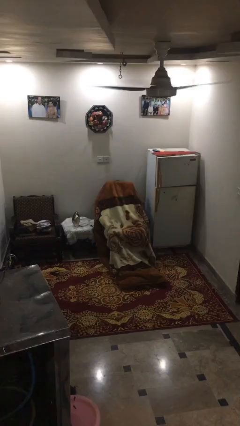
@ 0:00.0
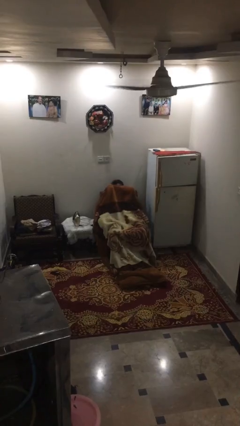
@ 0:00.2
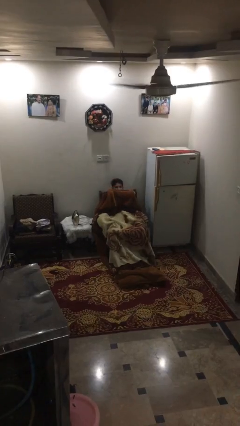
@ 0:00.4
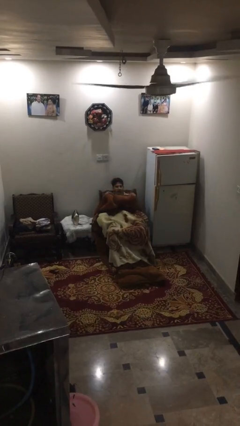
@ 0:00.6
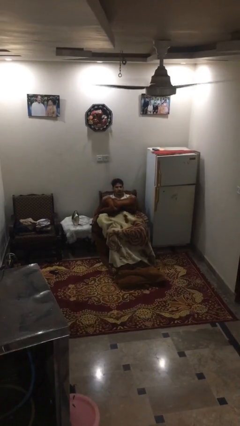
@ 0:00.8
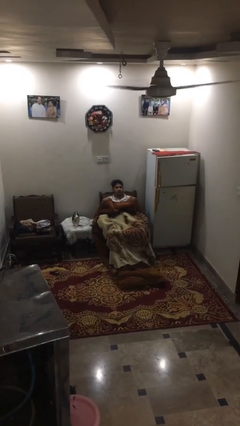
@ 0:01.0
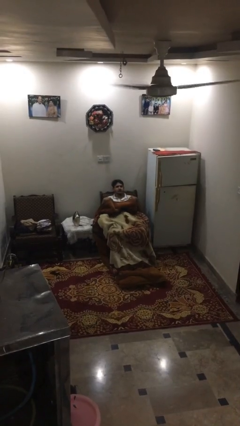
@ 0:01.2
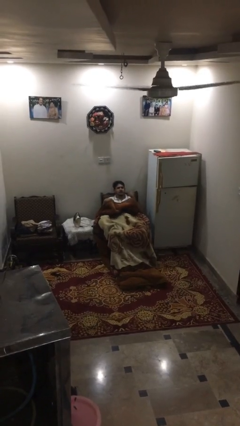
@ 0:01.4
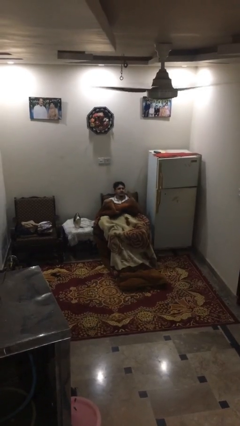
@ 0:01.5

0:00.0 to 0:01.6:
person uncovers with blanket

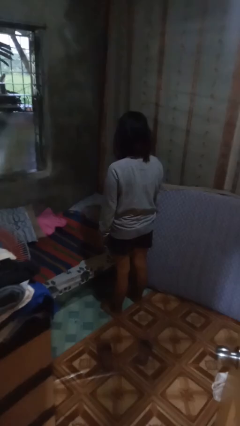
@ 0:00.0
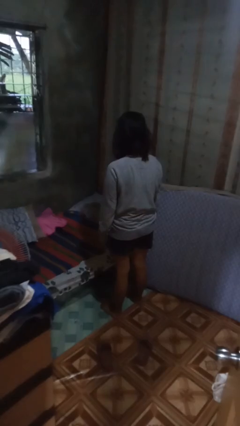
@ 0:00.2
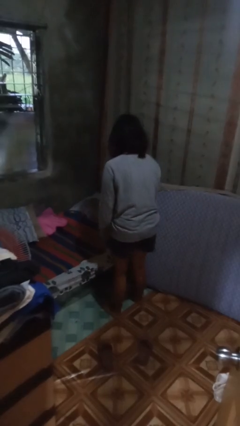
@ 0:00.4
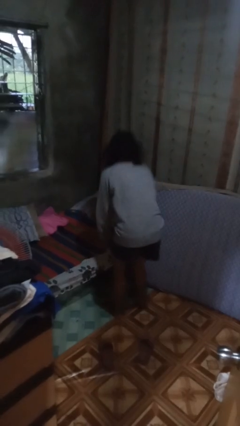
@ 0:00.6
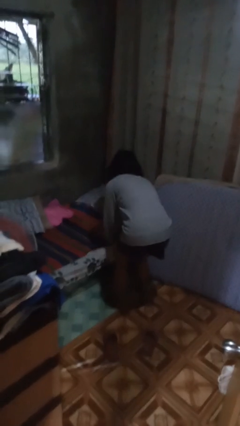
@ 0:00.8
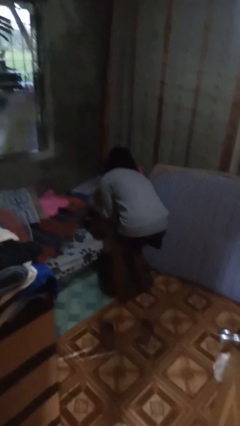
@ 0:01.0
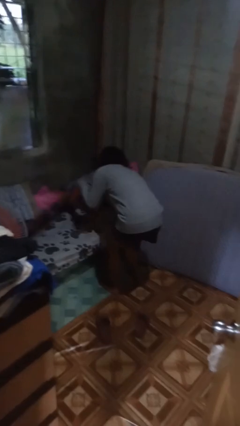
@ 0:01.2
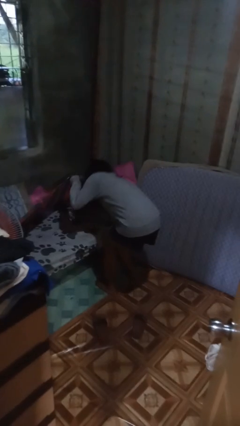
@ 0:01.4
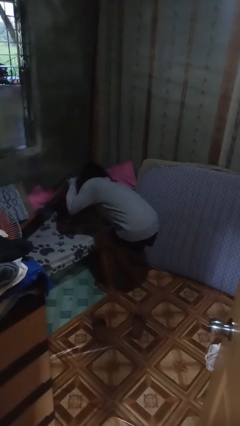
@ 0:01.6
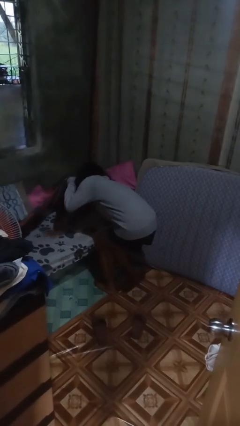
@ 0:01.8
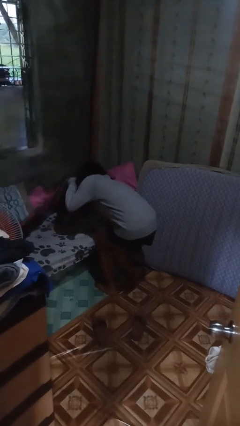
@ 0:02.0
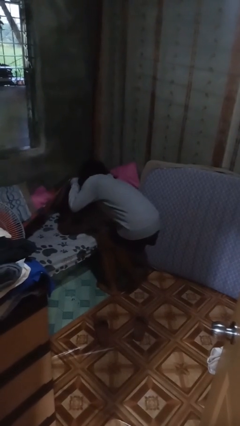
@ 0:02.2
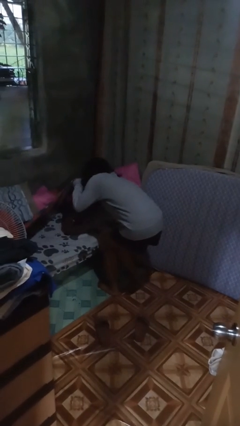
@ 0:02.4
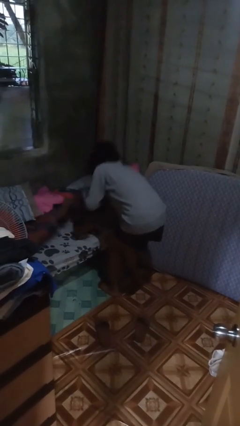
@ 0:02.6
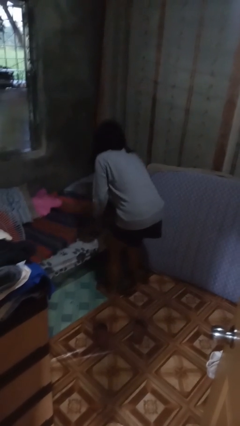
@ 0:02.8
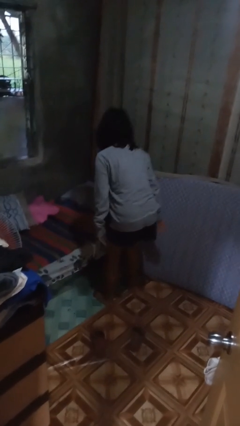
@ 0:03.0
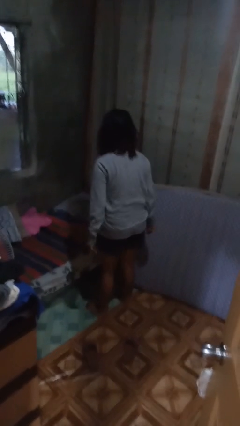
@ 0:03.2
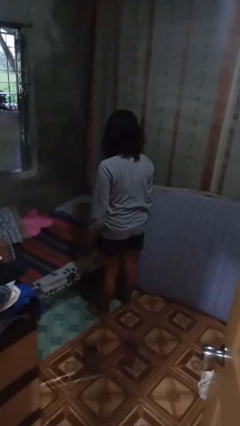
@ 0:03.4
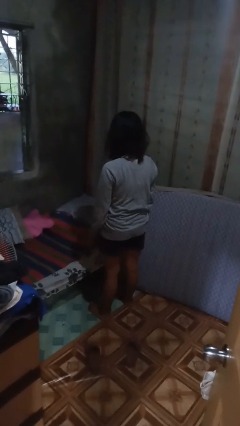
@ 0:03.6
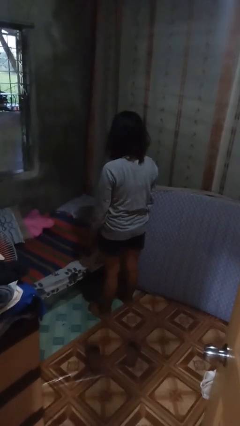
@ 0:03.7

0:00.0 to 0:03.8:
person searches under bed

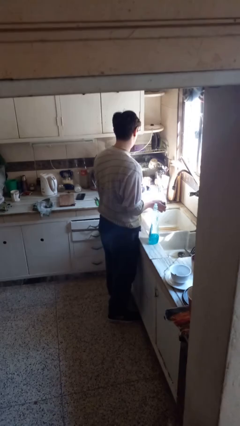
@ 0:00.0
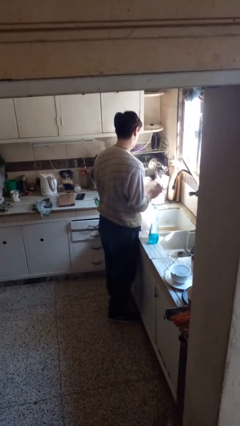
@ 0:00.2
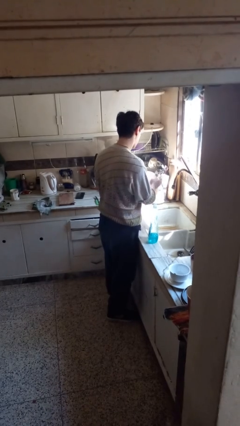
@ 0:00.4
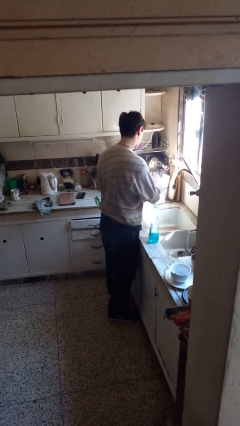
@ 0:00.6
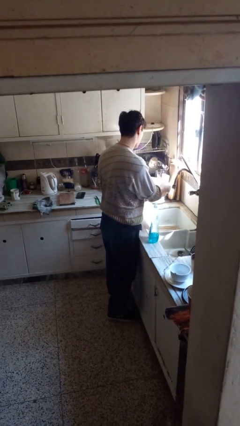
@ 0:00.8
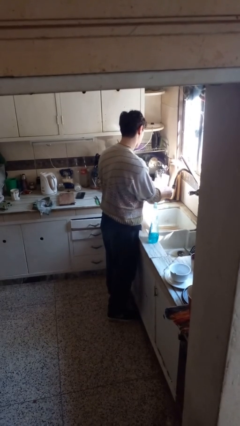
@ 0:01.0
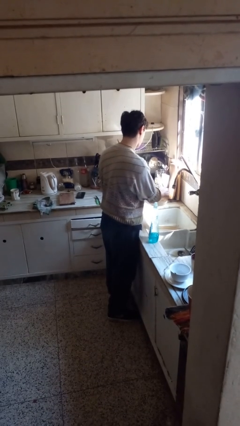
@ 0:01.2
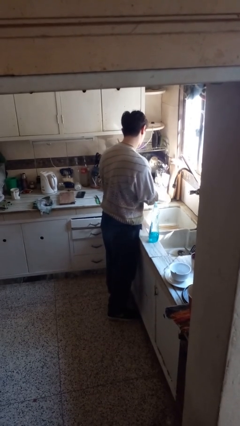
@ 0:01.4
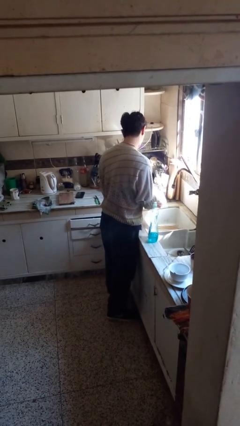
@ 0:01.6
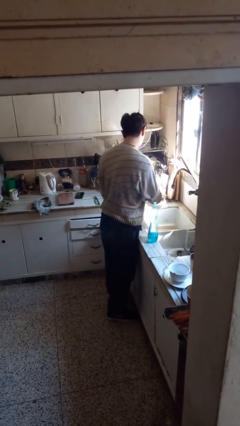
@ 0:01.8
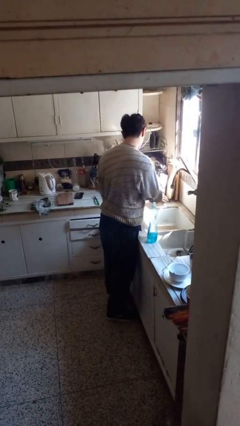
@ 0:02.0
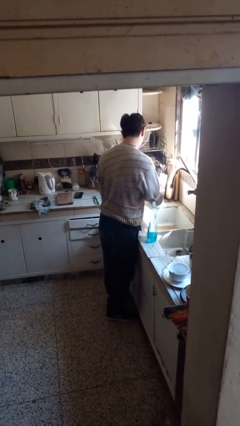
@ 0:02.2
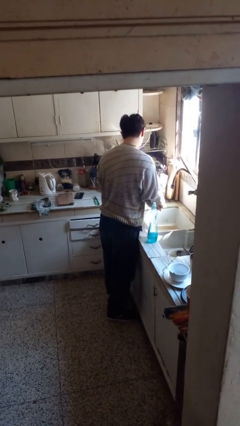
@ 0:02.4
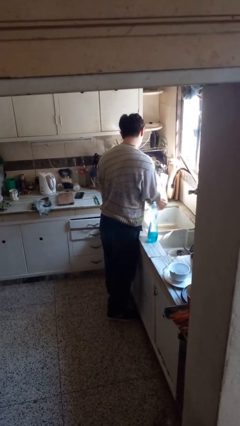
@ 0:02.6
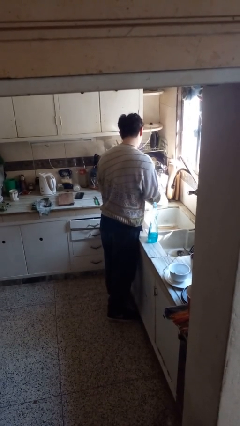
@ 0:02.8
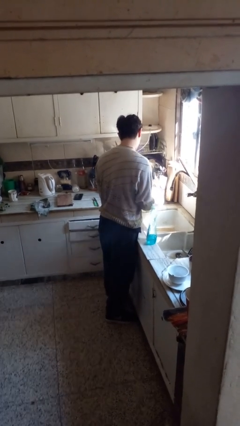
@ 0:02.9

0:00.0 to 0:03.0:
person washes dish

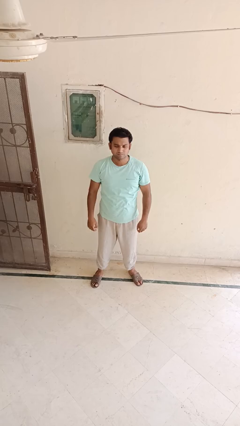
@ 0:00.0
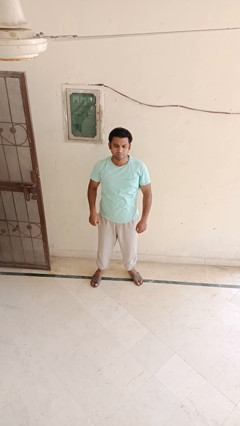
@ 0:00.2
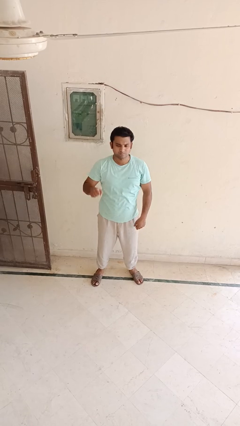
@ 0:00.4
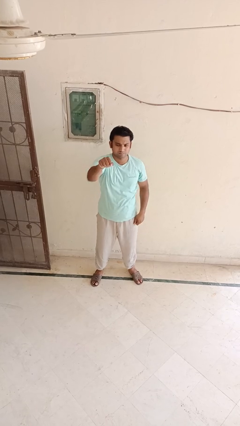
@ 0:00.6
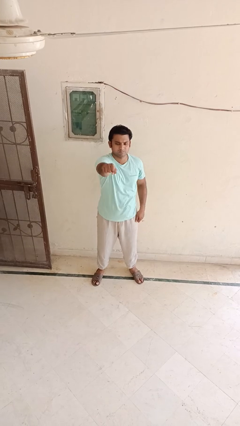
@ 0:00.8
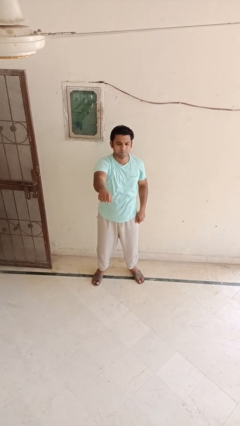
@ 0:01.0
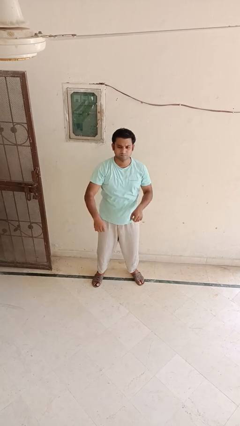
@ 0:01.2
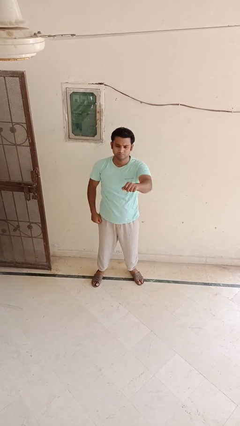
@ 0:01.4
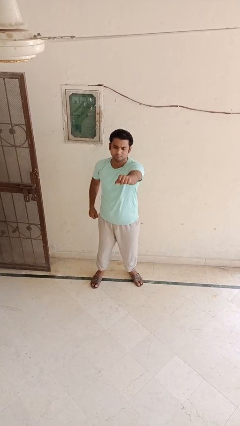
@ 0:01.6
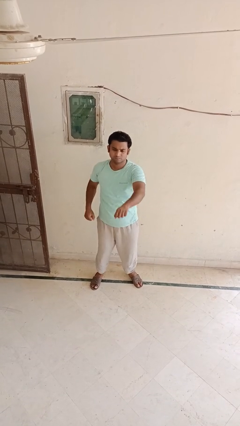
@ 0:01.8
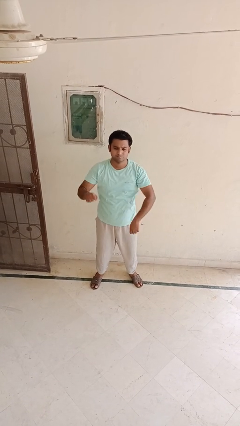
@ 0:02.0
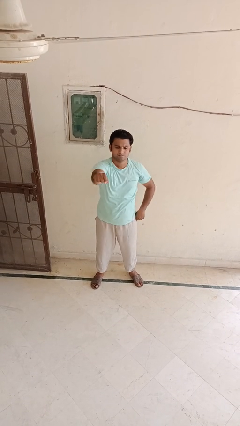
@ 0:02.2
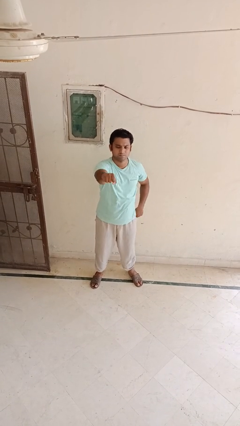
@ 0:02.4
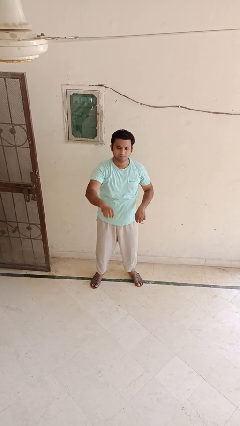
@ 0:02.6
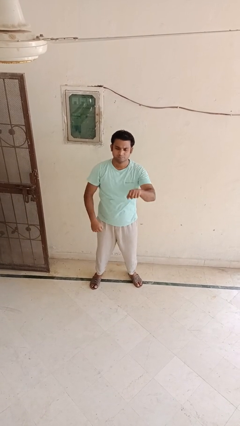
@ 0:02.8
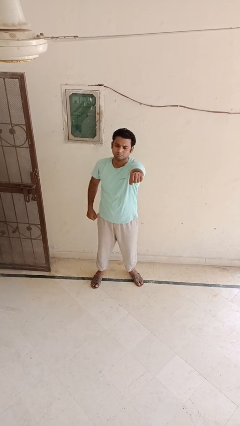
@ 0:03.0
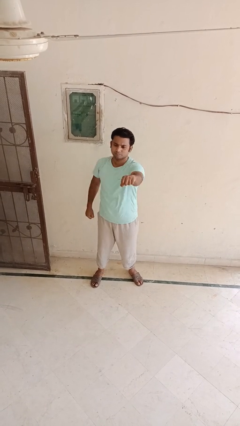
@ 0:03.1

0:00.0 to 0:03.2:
person punches

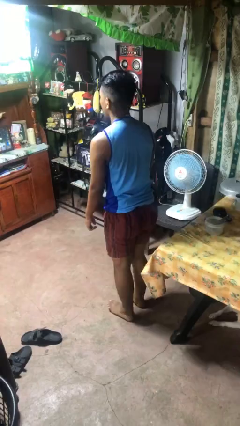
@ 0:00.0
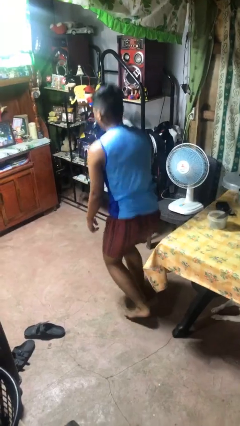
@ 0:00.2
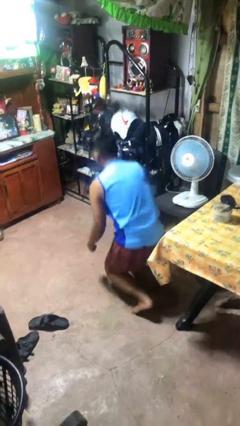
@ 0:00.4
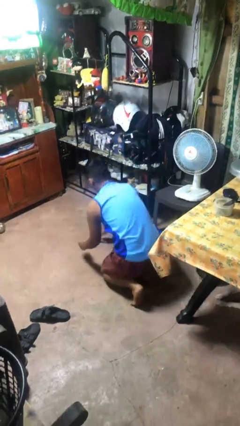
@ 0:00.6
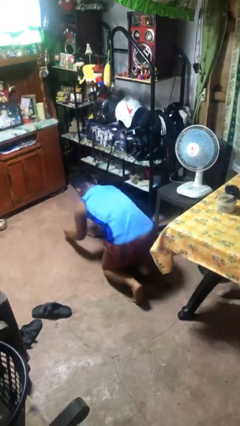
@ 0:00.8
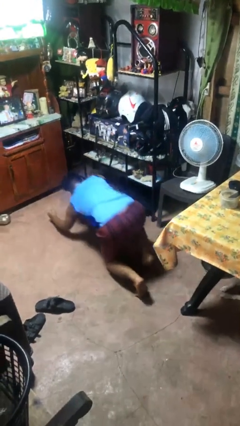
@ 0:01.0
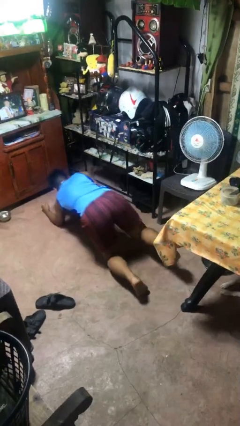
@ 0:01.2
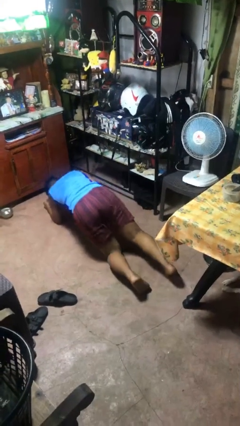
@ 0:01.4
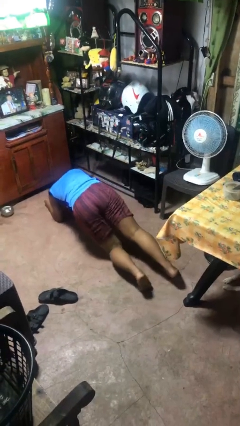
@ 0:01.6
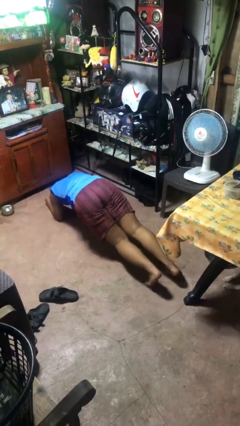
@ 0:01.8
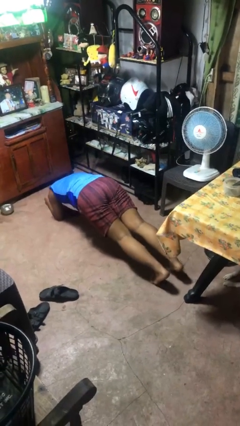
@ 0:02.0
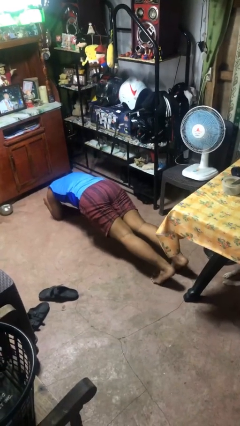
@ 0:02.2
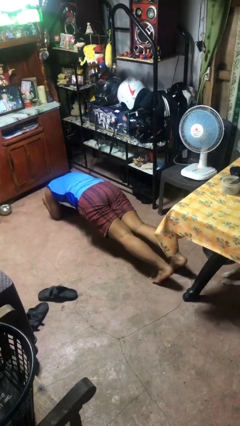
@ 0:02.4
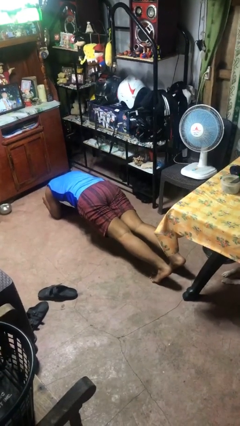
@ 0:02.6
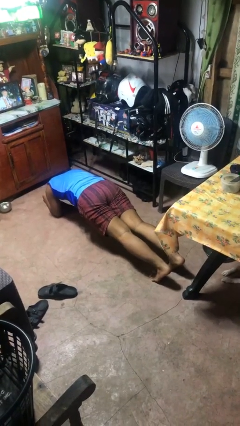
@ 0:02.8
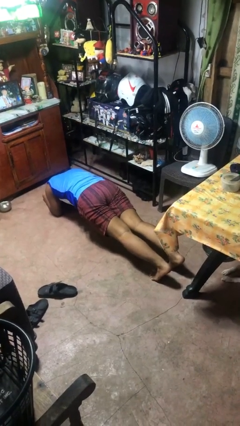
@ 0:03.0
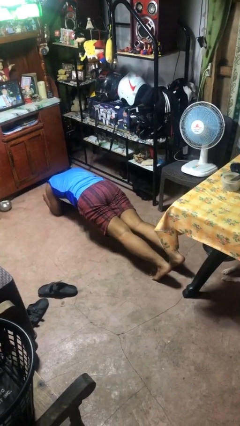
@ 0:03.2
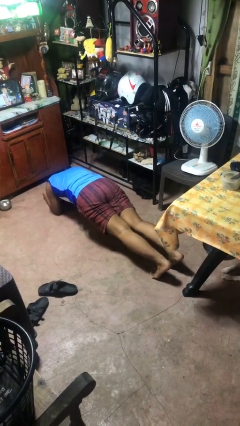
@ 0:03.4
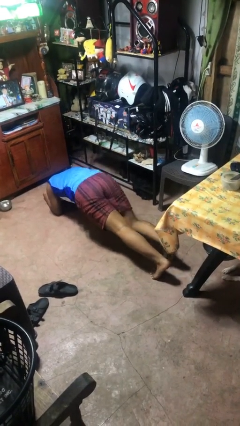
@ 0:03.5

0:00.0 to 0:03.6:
person exercises with plank

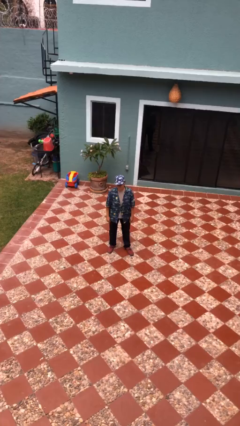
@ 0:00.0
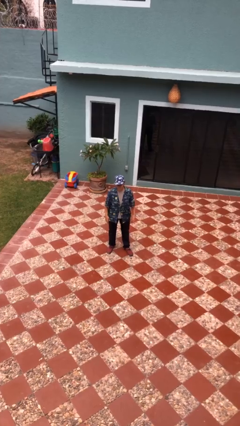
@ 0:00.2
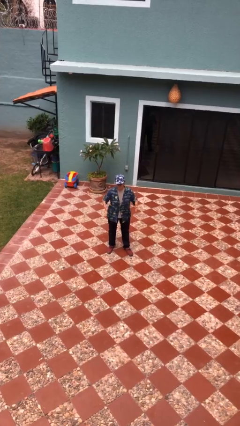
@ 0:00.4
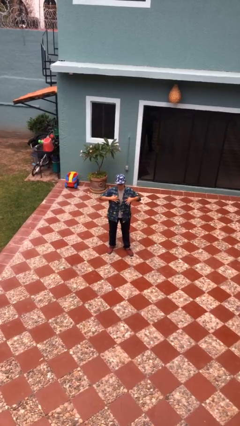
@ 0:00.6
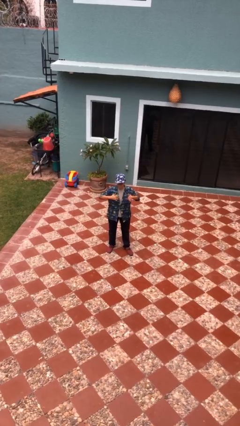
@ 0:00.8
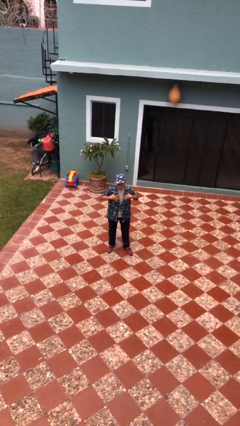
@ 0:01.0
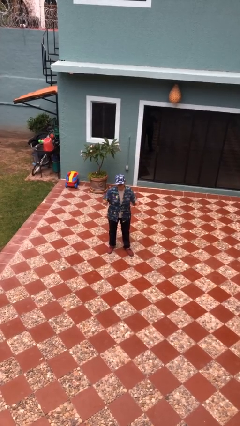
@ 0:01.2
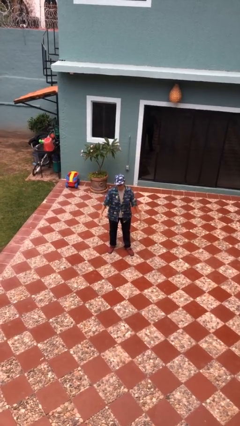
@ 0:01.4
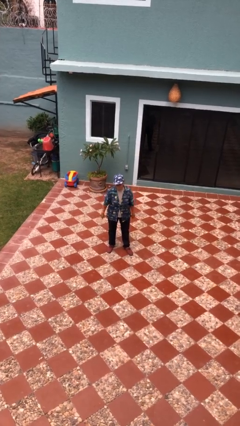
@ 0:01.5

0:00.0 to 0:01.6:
person drums on chest

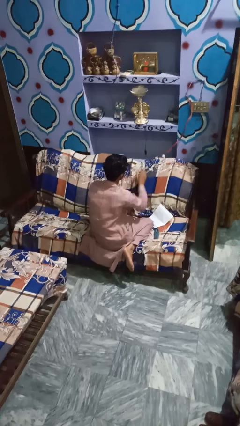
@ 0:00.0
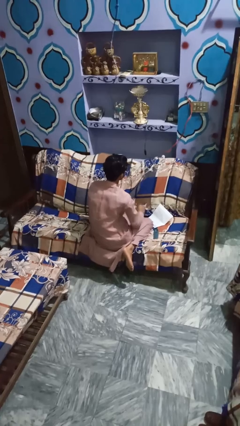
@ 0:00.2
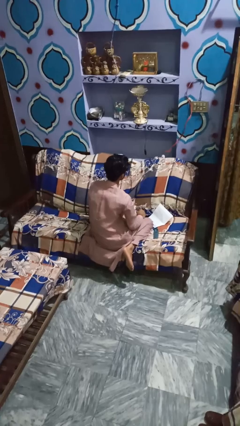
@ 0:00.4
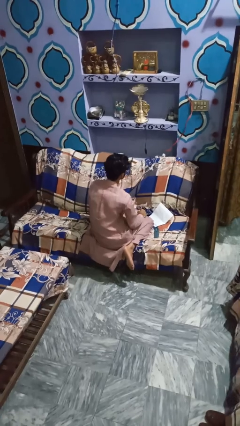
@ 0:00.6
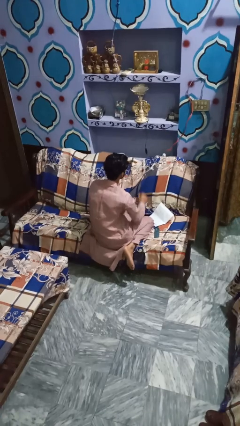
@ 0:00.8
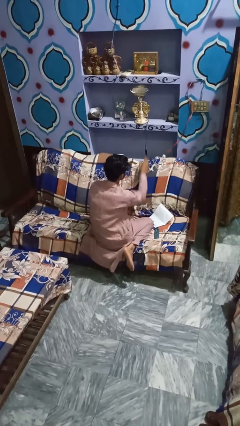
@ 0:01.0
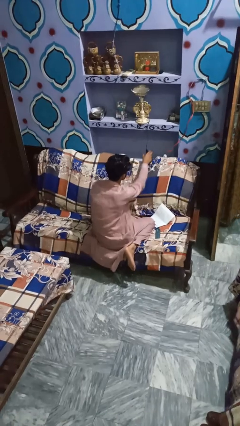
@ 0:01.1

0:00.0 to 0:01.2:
person turns off lamp
